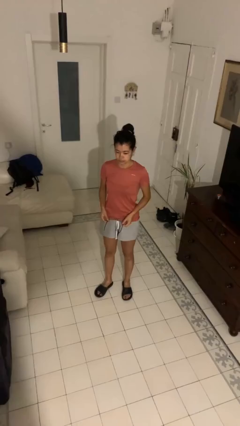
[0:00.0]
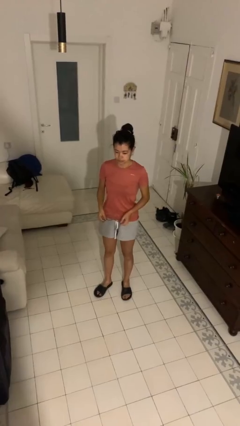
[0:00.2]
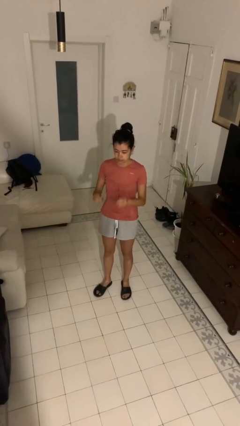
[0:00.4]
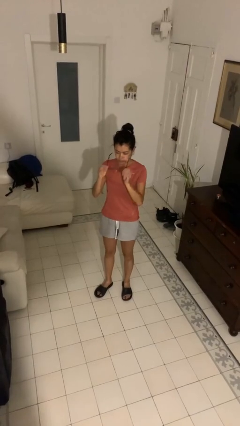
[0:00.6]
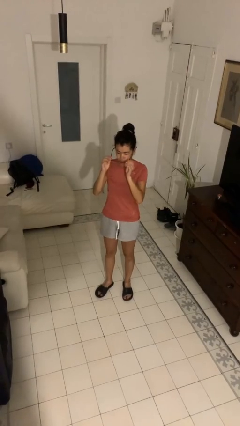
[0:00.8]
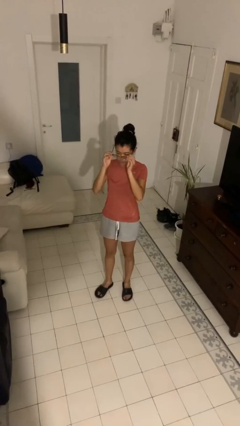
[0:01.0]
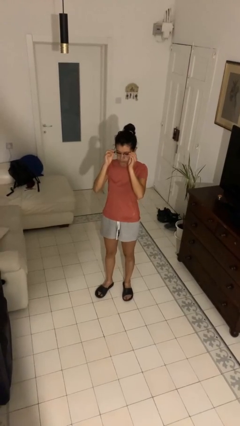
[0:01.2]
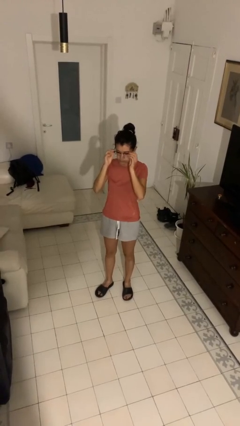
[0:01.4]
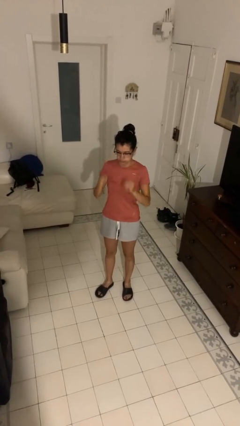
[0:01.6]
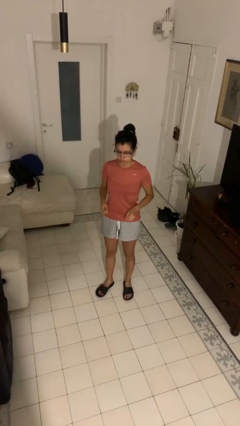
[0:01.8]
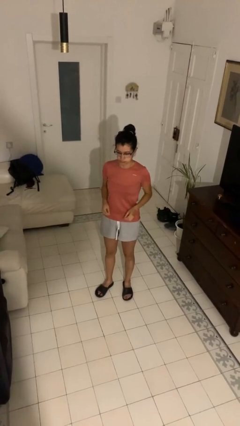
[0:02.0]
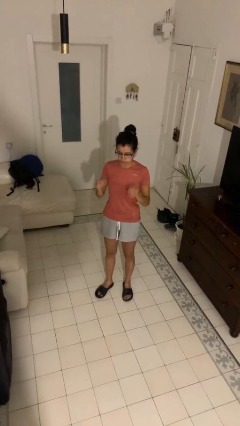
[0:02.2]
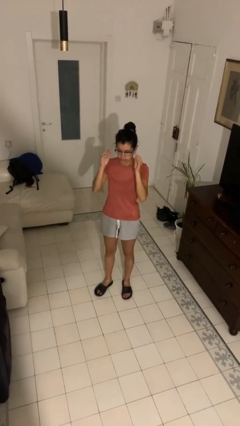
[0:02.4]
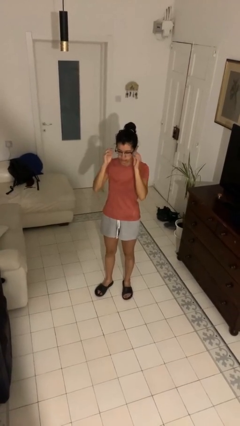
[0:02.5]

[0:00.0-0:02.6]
person puts on glasses

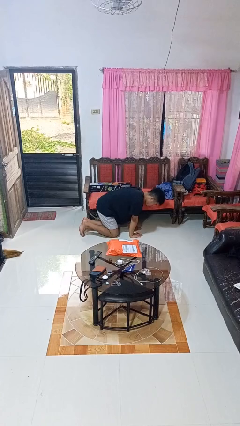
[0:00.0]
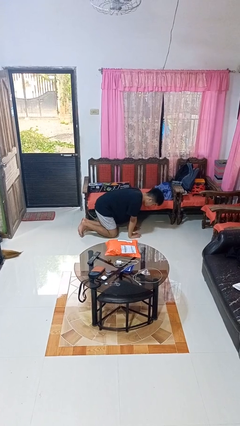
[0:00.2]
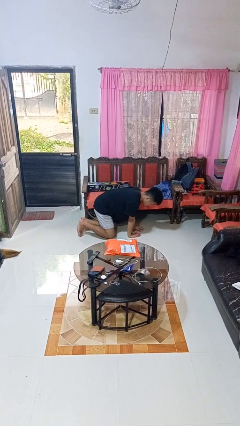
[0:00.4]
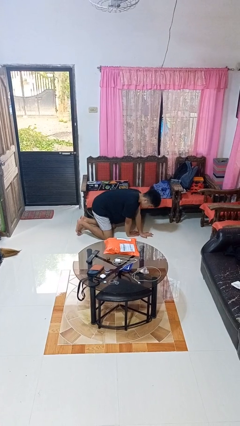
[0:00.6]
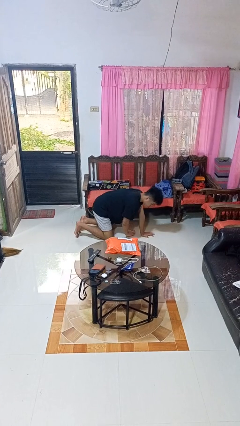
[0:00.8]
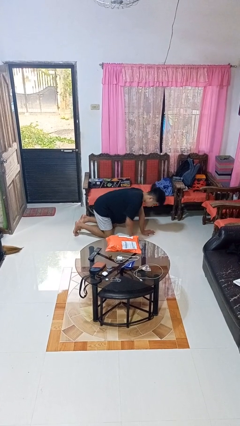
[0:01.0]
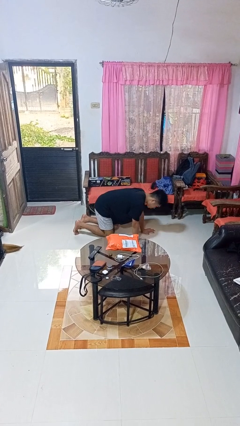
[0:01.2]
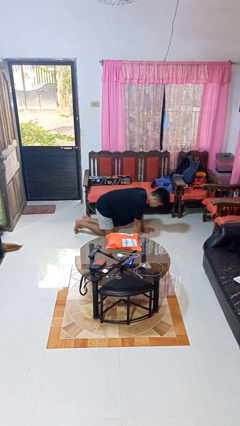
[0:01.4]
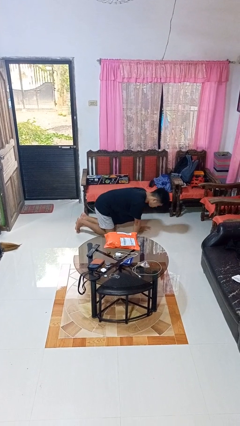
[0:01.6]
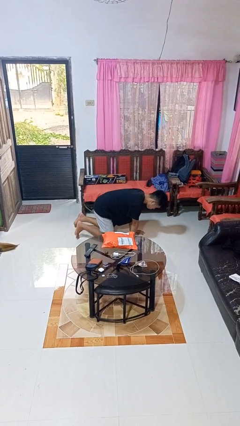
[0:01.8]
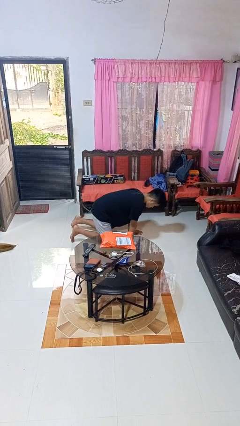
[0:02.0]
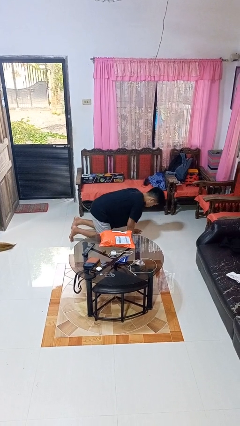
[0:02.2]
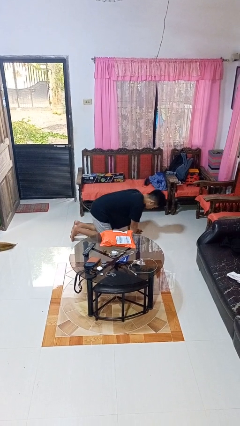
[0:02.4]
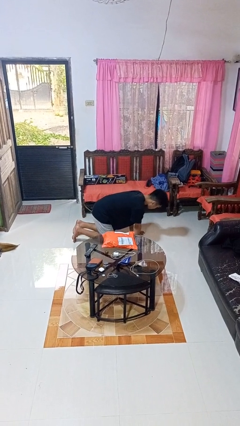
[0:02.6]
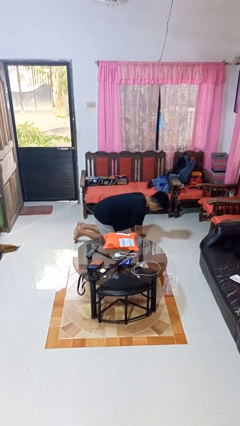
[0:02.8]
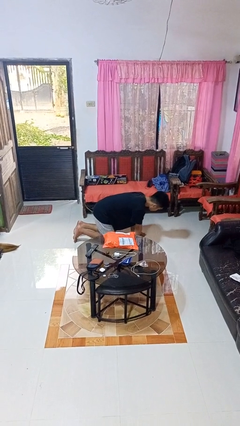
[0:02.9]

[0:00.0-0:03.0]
person crawls

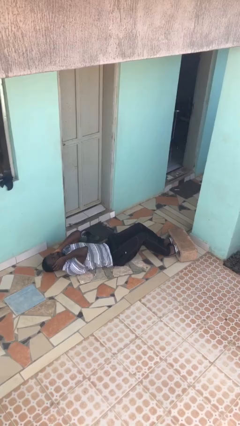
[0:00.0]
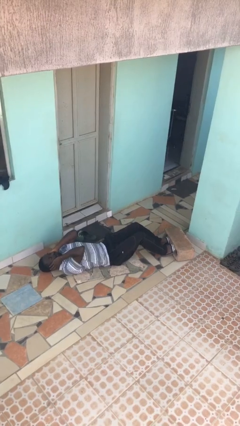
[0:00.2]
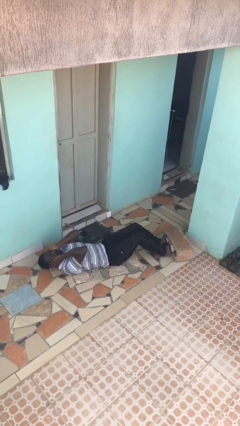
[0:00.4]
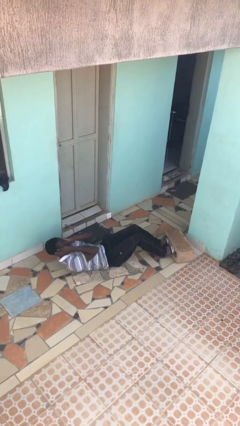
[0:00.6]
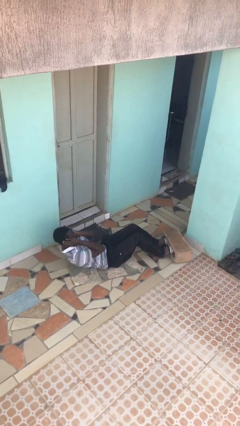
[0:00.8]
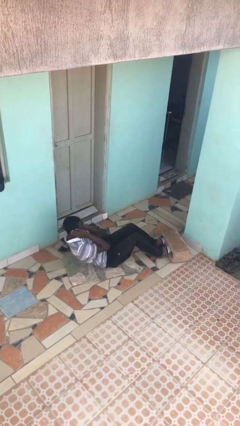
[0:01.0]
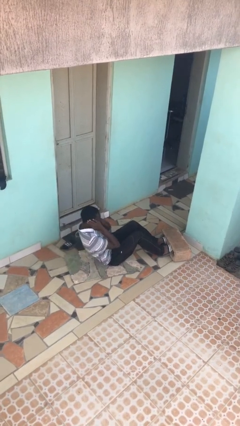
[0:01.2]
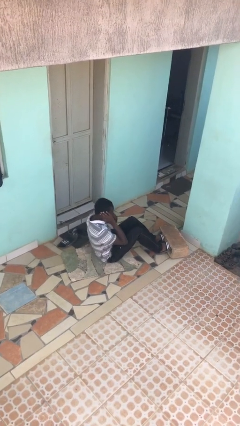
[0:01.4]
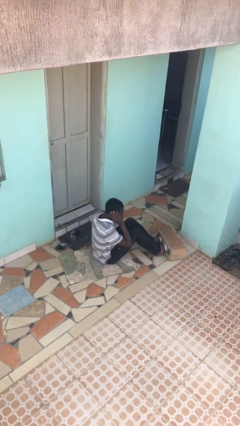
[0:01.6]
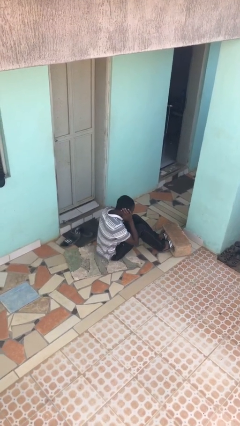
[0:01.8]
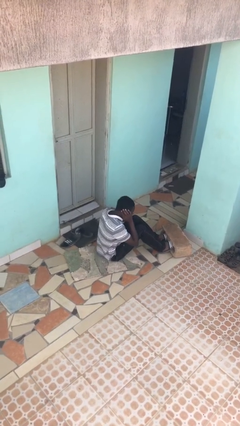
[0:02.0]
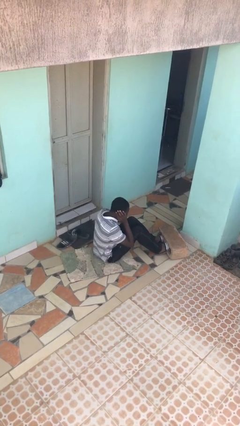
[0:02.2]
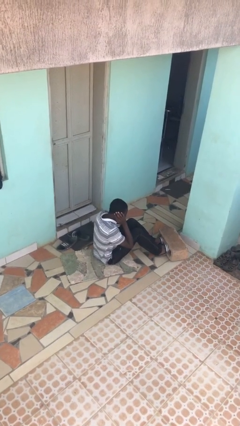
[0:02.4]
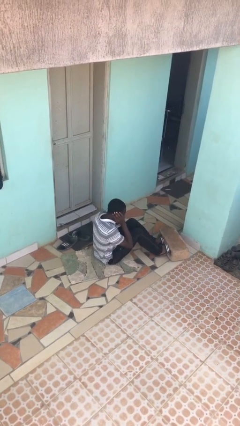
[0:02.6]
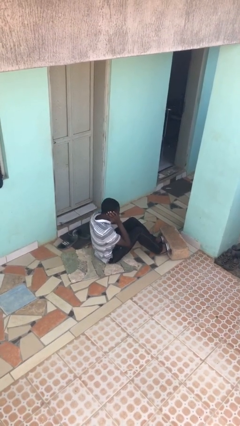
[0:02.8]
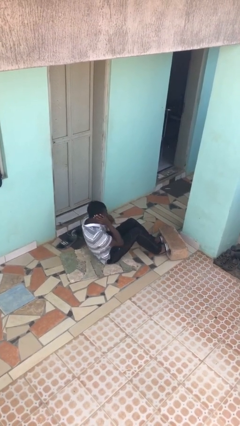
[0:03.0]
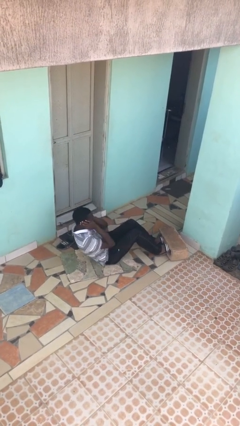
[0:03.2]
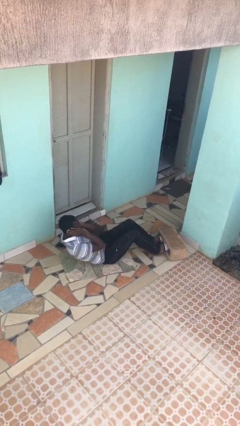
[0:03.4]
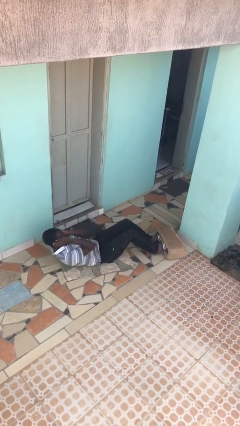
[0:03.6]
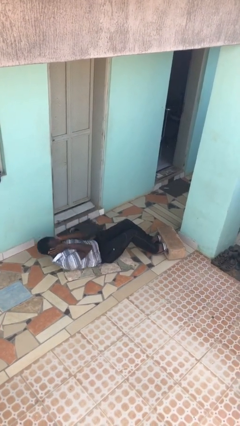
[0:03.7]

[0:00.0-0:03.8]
person exercises with situp

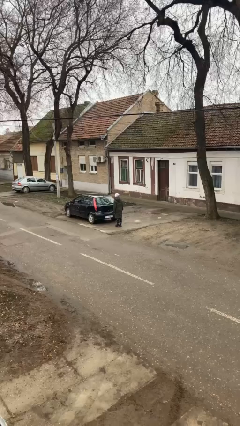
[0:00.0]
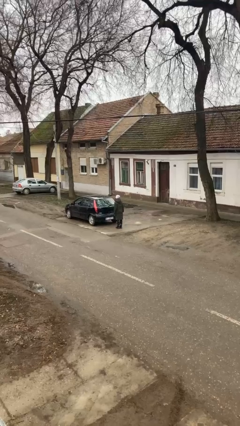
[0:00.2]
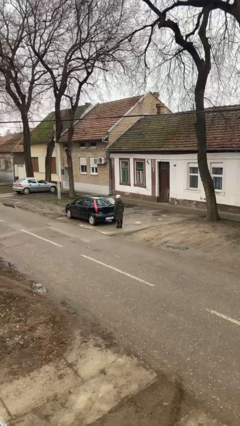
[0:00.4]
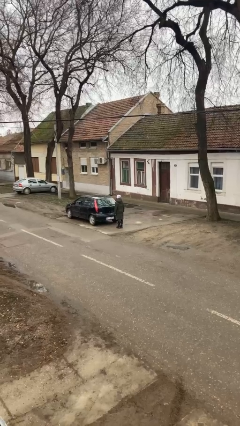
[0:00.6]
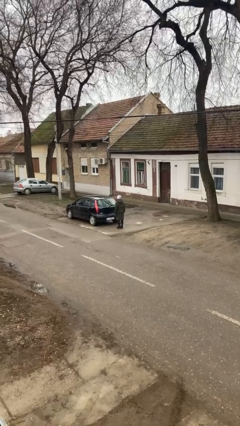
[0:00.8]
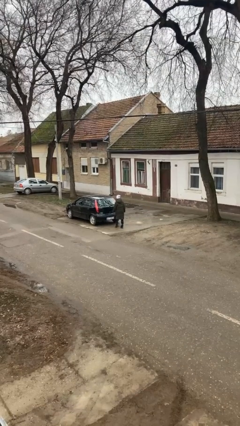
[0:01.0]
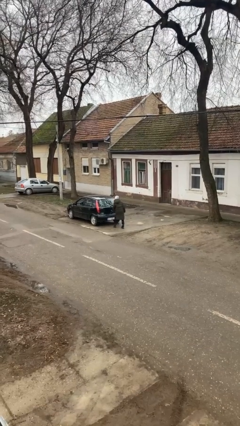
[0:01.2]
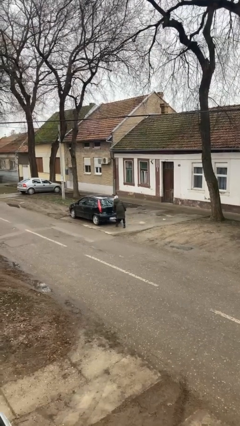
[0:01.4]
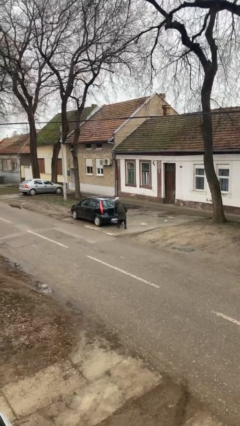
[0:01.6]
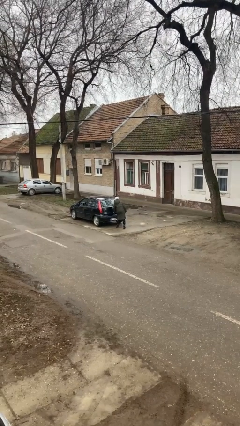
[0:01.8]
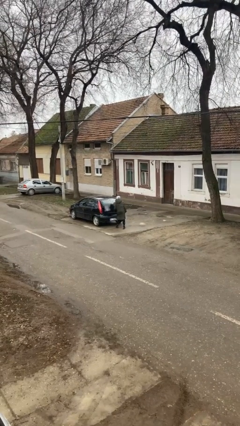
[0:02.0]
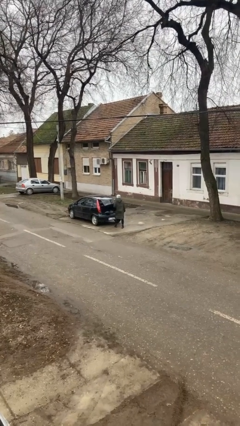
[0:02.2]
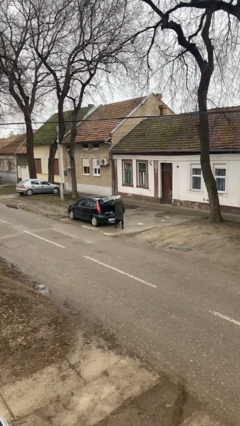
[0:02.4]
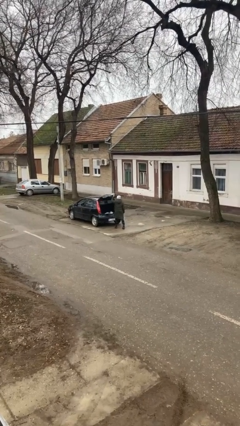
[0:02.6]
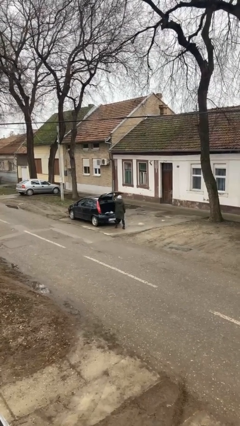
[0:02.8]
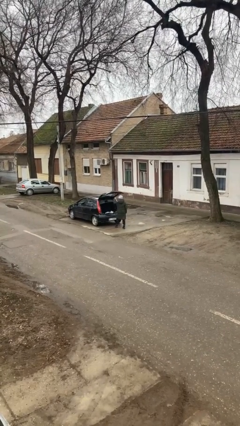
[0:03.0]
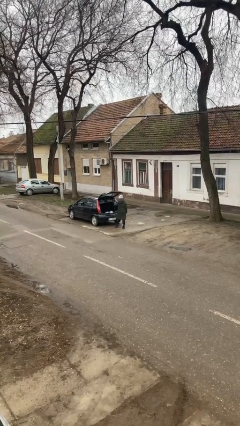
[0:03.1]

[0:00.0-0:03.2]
person opens car trunk

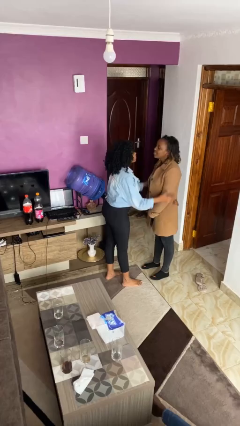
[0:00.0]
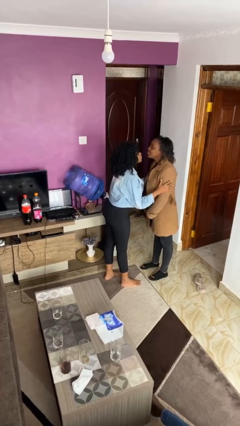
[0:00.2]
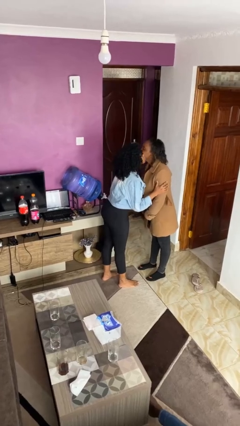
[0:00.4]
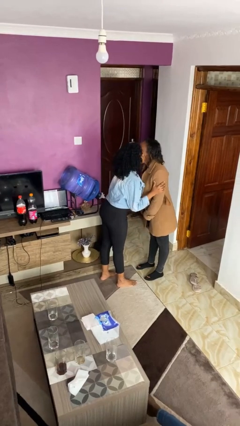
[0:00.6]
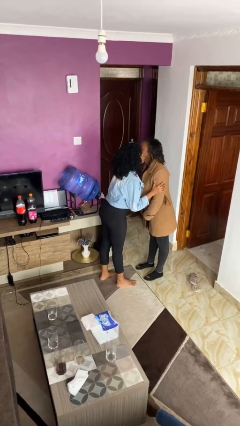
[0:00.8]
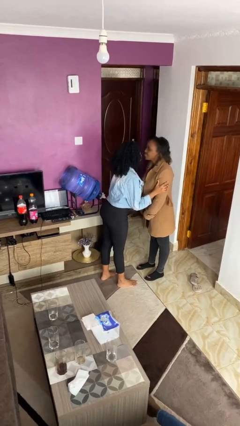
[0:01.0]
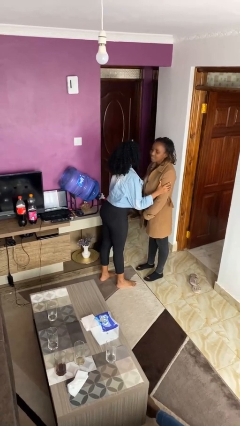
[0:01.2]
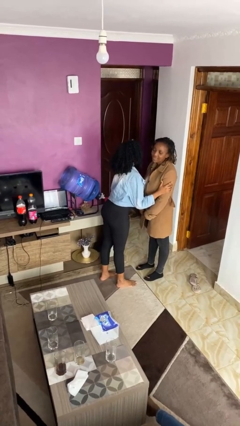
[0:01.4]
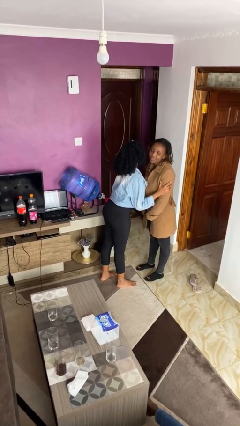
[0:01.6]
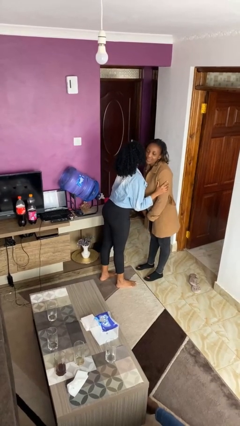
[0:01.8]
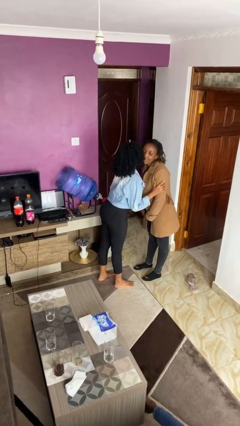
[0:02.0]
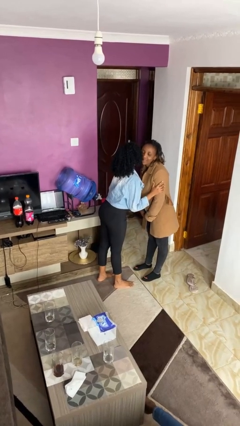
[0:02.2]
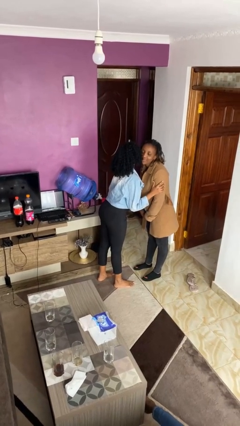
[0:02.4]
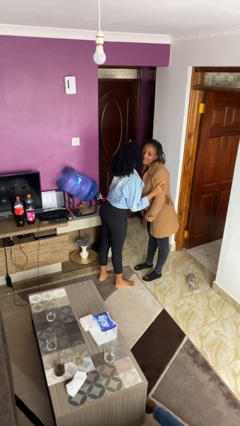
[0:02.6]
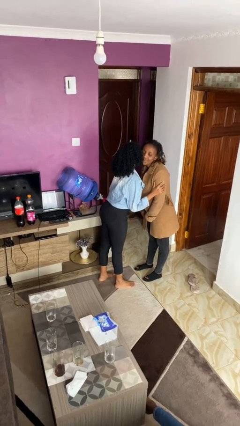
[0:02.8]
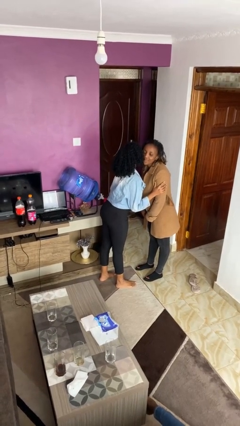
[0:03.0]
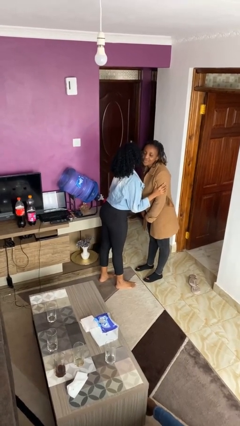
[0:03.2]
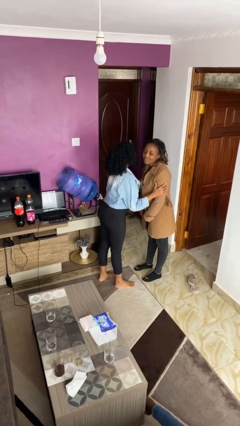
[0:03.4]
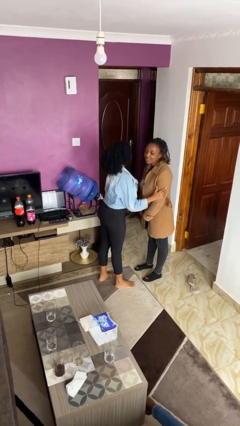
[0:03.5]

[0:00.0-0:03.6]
person kisses cheek of person

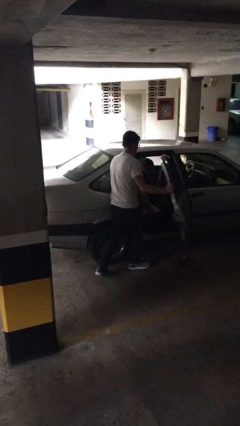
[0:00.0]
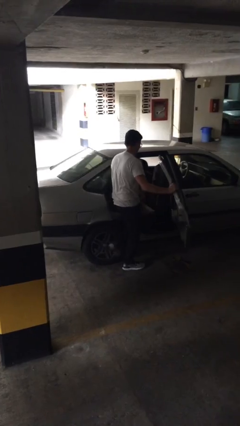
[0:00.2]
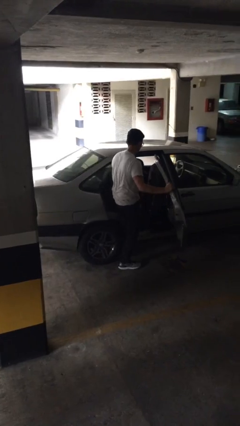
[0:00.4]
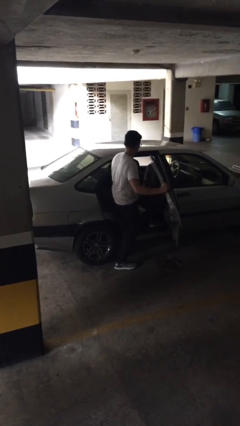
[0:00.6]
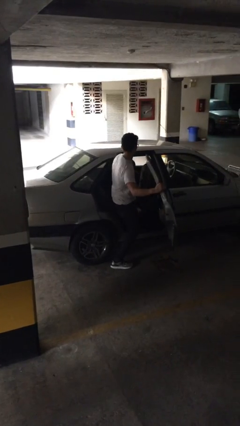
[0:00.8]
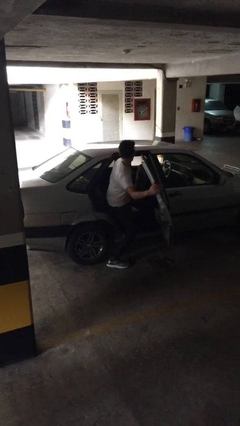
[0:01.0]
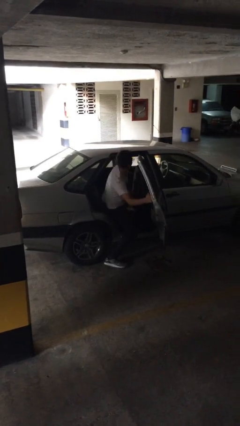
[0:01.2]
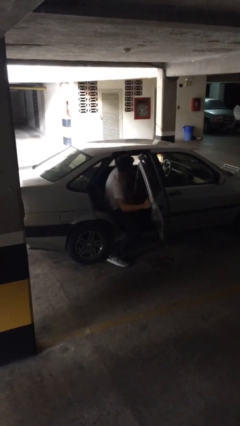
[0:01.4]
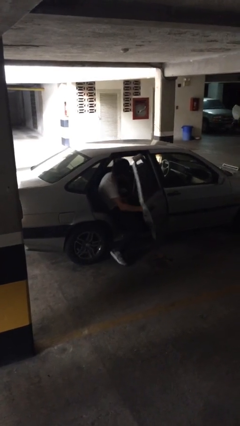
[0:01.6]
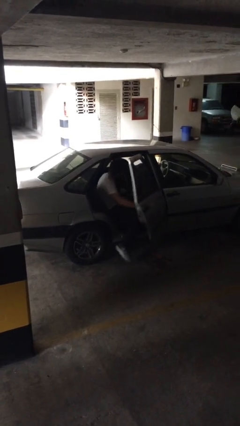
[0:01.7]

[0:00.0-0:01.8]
person enters car
